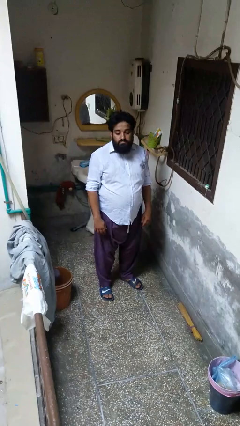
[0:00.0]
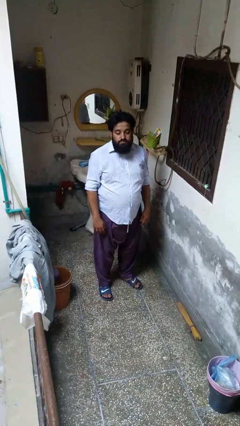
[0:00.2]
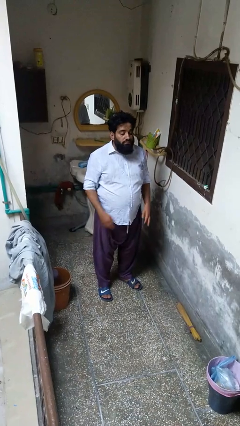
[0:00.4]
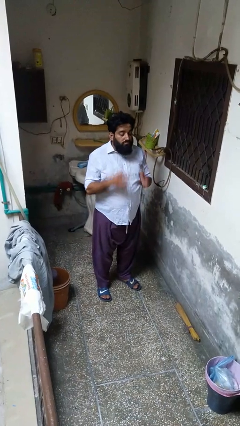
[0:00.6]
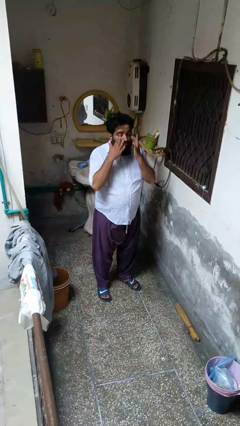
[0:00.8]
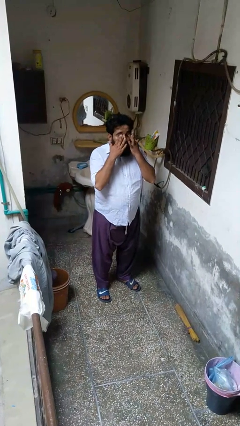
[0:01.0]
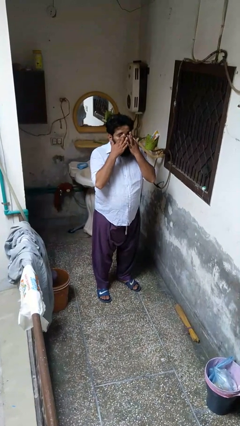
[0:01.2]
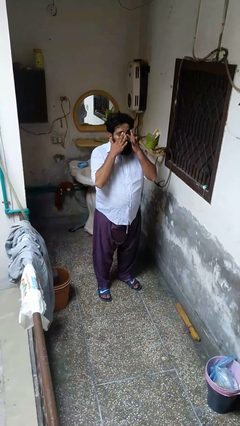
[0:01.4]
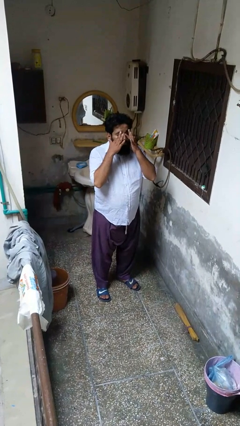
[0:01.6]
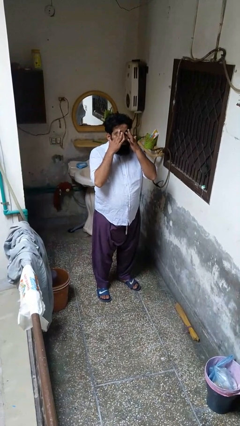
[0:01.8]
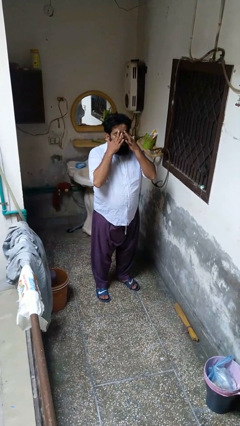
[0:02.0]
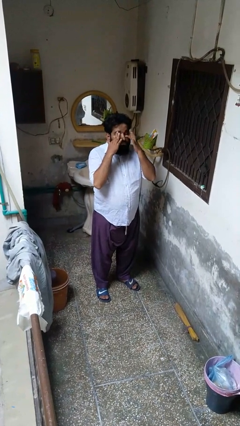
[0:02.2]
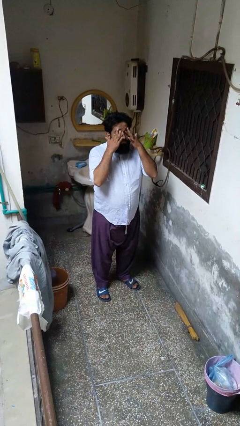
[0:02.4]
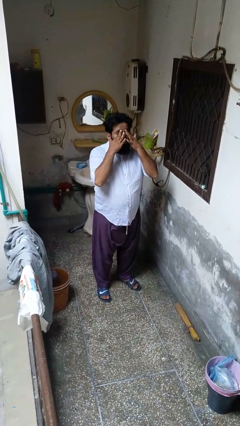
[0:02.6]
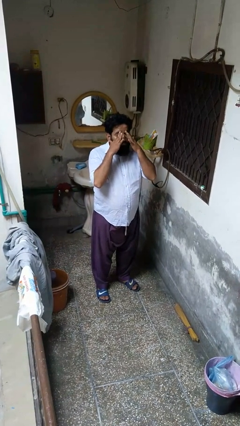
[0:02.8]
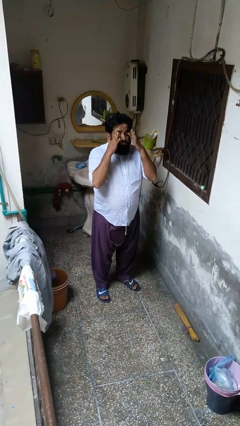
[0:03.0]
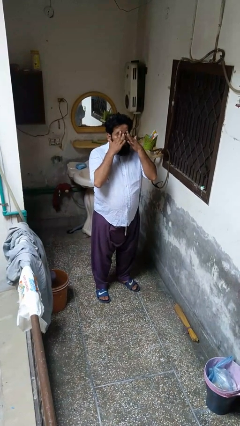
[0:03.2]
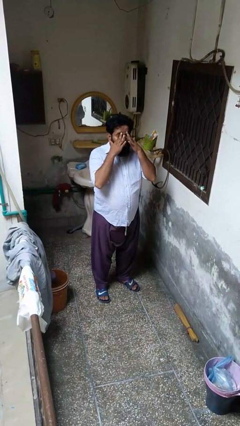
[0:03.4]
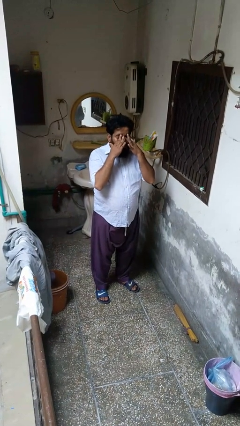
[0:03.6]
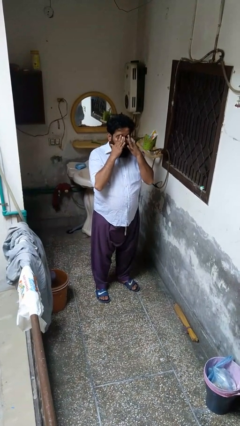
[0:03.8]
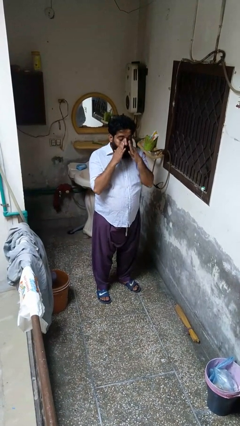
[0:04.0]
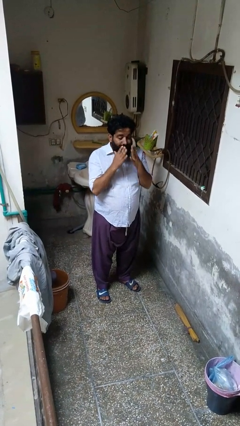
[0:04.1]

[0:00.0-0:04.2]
person rubs eyes

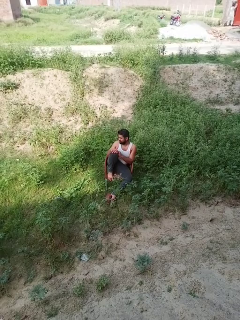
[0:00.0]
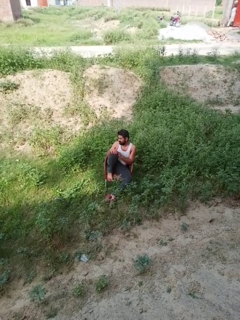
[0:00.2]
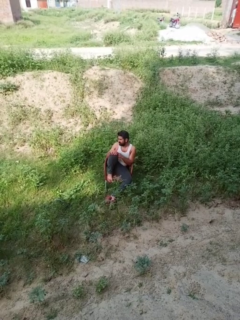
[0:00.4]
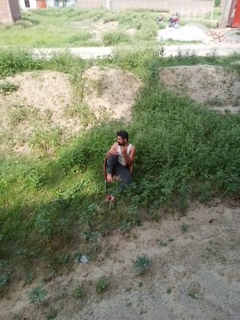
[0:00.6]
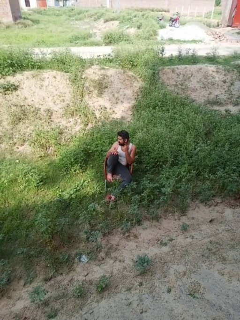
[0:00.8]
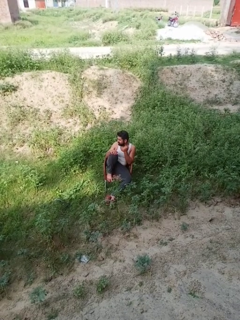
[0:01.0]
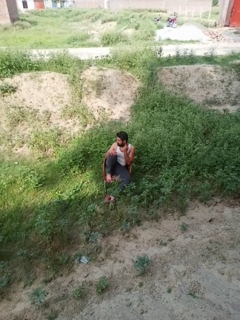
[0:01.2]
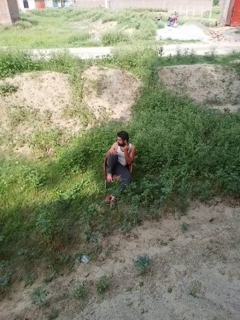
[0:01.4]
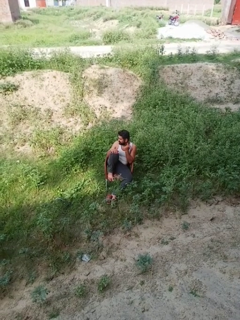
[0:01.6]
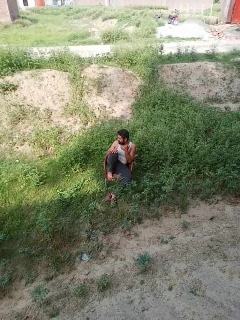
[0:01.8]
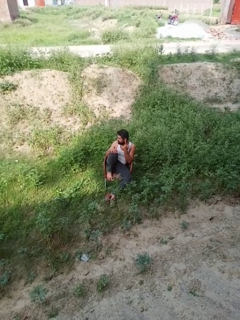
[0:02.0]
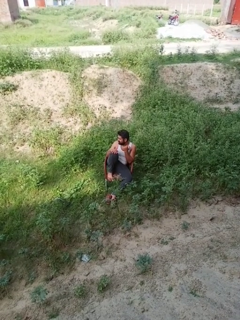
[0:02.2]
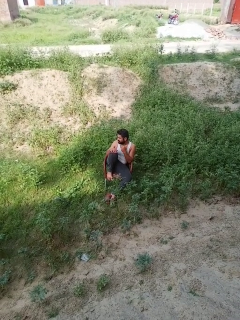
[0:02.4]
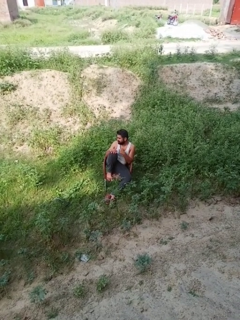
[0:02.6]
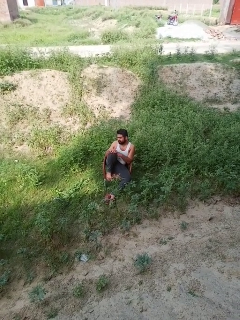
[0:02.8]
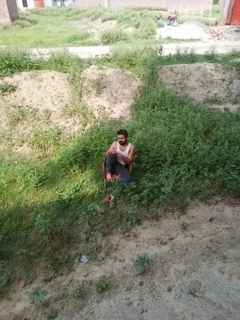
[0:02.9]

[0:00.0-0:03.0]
person touches earlobe

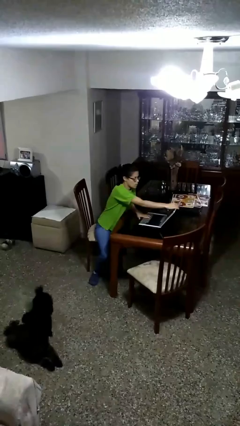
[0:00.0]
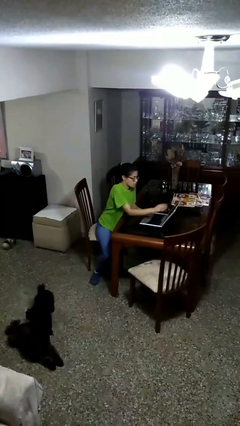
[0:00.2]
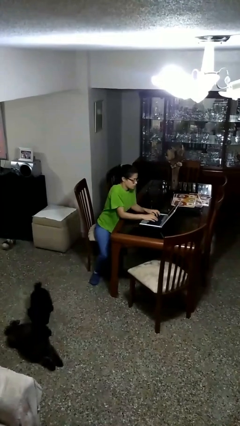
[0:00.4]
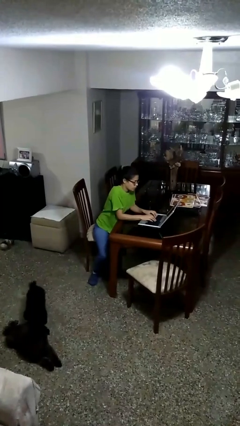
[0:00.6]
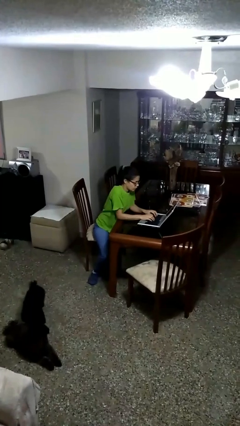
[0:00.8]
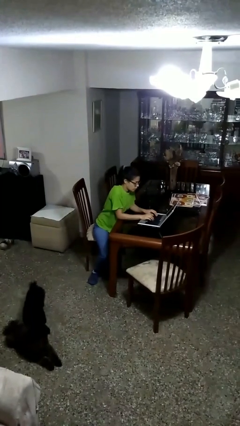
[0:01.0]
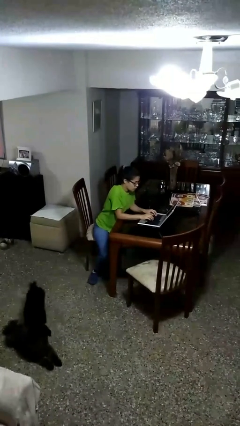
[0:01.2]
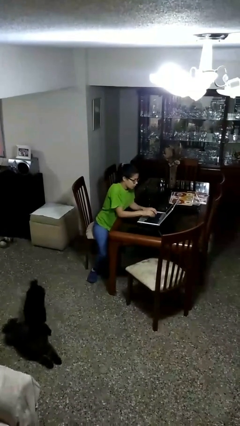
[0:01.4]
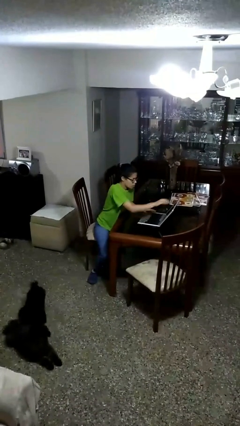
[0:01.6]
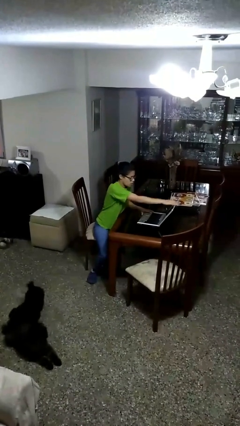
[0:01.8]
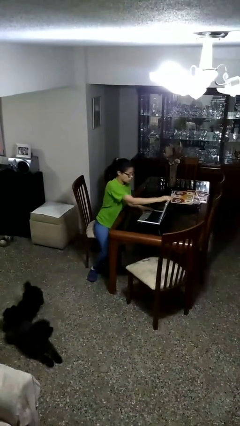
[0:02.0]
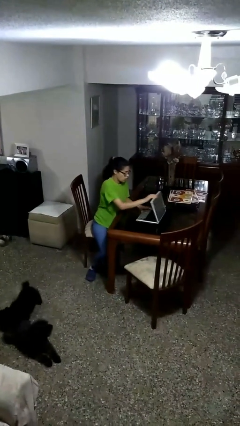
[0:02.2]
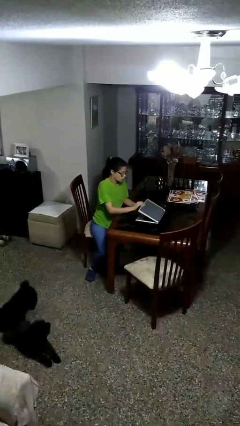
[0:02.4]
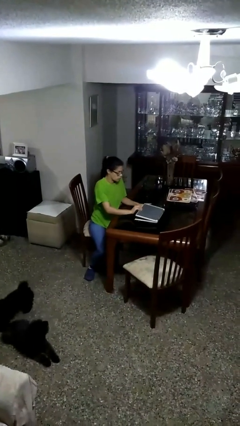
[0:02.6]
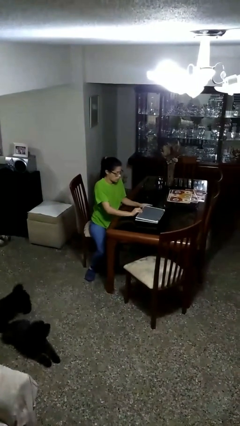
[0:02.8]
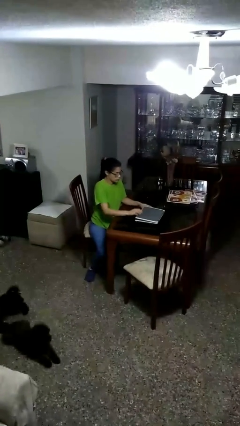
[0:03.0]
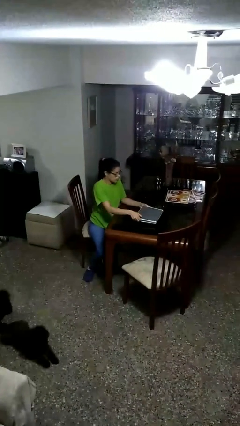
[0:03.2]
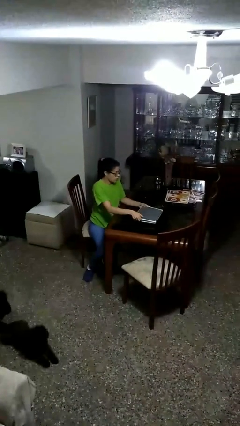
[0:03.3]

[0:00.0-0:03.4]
person interacts with laptop

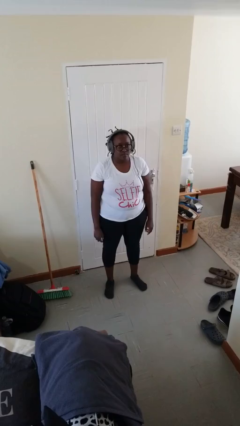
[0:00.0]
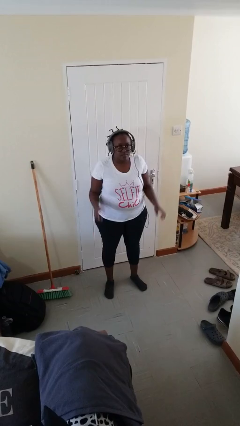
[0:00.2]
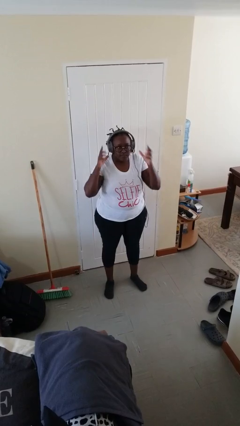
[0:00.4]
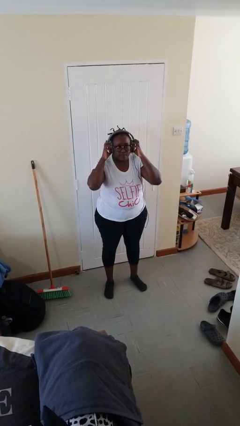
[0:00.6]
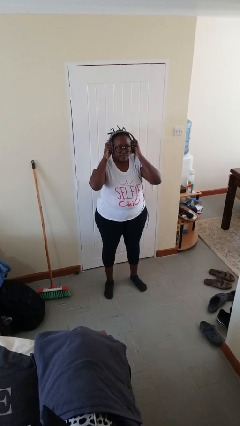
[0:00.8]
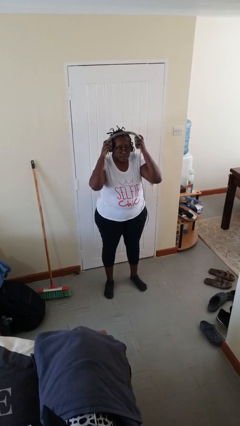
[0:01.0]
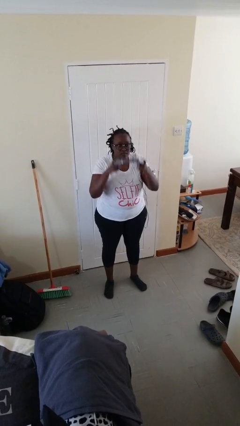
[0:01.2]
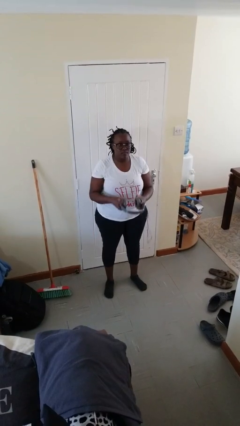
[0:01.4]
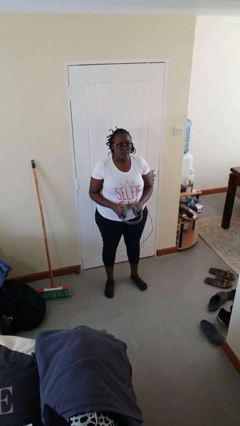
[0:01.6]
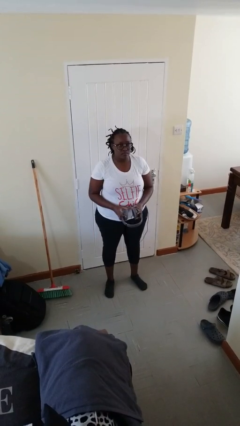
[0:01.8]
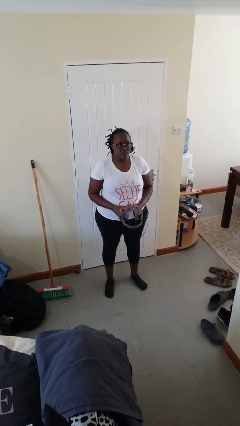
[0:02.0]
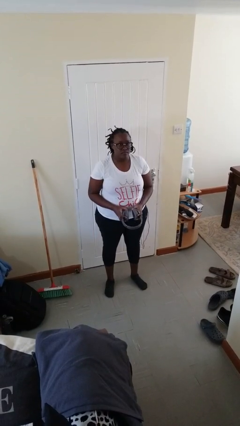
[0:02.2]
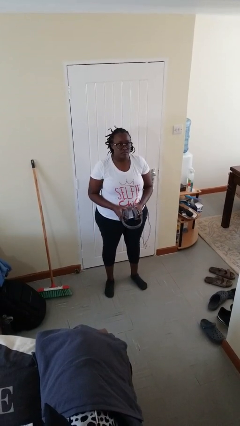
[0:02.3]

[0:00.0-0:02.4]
person takes off headphones

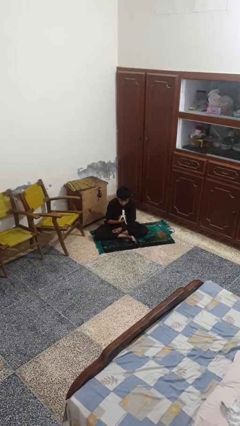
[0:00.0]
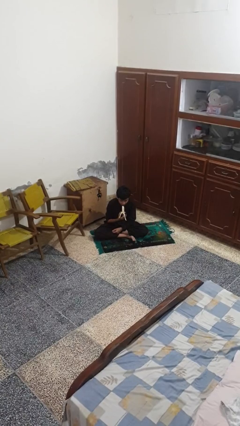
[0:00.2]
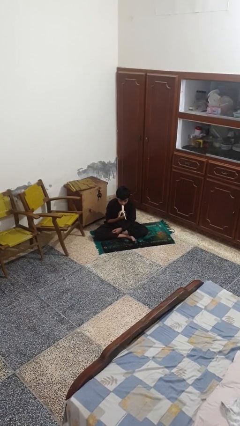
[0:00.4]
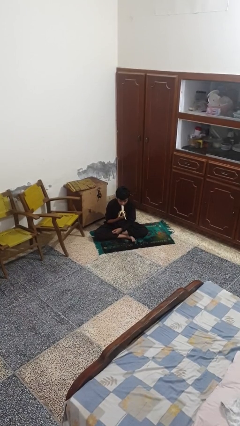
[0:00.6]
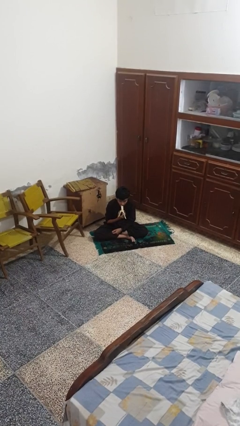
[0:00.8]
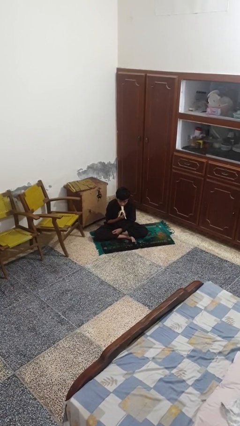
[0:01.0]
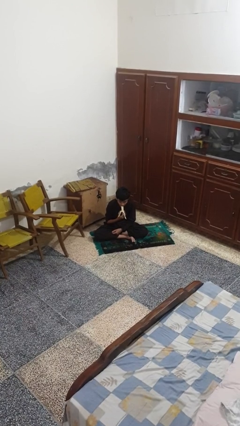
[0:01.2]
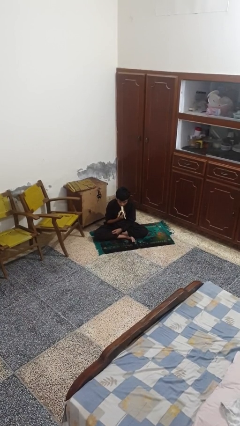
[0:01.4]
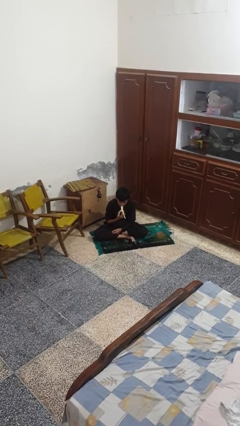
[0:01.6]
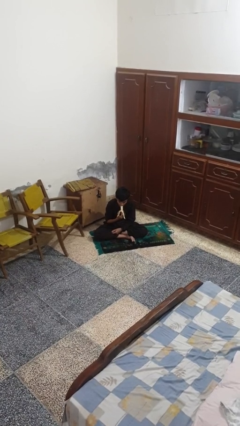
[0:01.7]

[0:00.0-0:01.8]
person eats banana

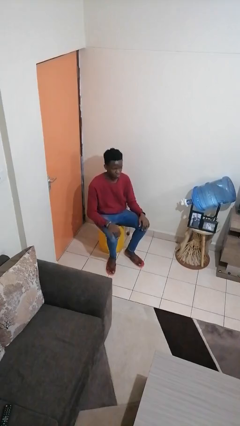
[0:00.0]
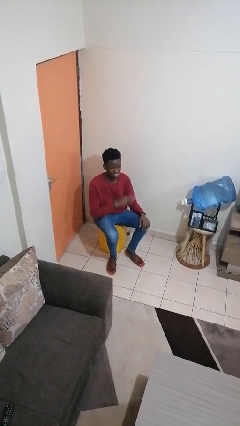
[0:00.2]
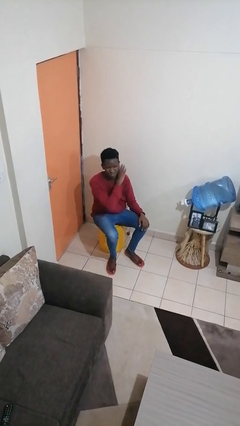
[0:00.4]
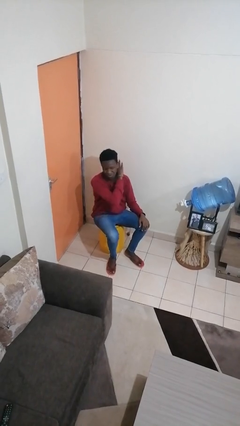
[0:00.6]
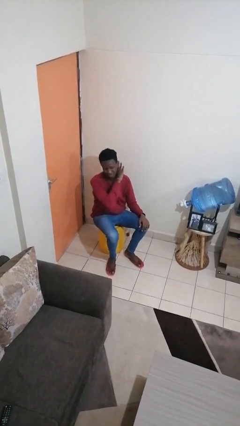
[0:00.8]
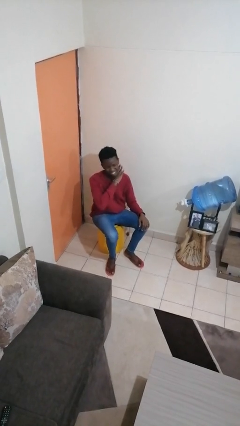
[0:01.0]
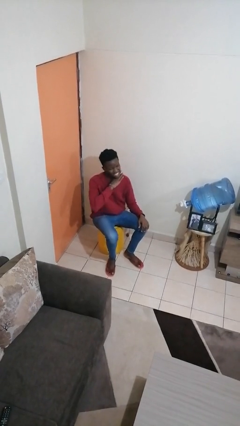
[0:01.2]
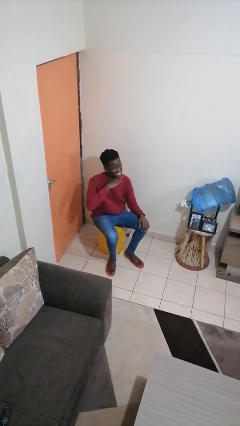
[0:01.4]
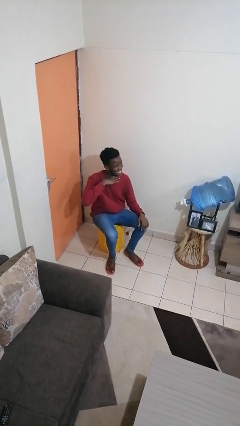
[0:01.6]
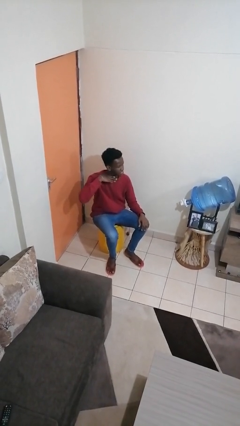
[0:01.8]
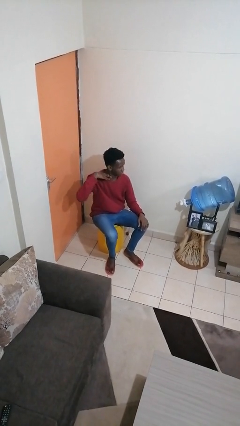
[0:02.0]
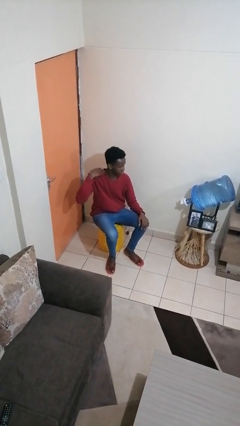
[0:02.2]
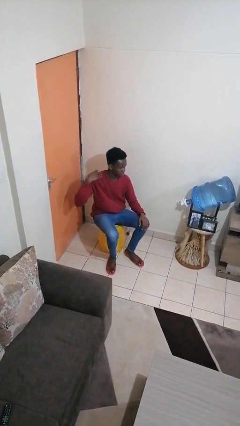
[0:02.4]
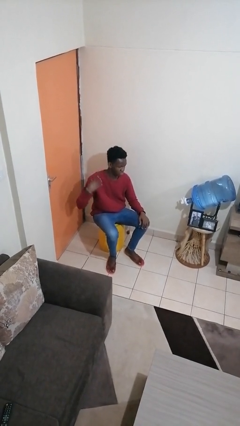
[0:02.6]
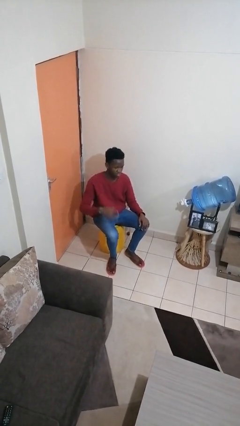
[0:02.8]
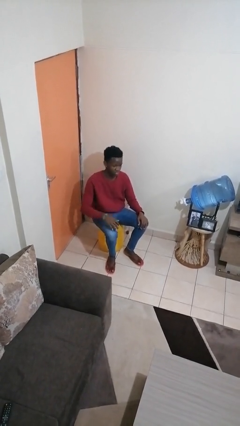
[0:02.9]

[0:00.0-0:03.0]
person gestures cut
